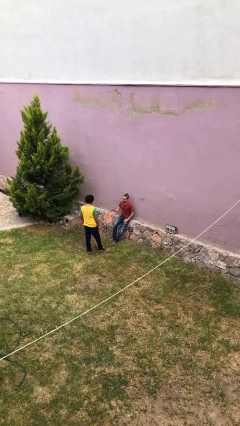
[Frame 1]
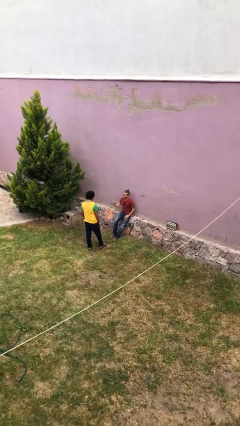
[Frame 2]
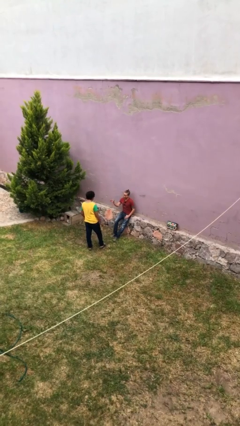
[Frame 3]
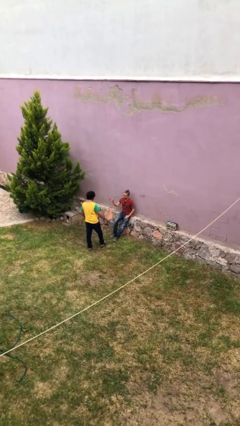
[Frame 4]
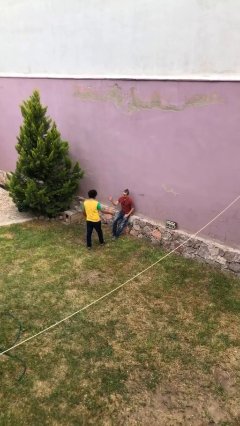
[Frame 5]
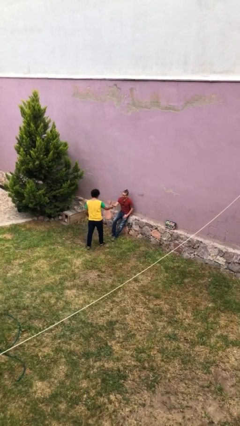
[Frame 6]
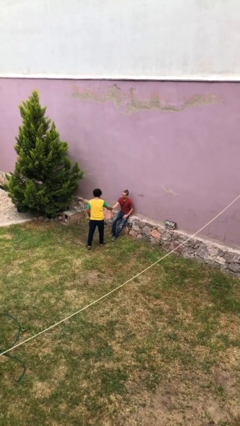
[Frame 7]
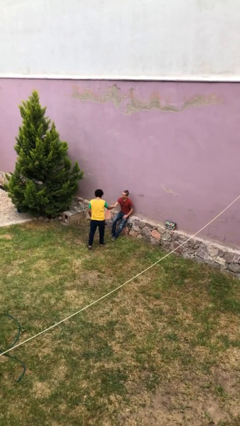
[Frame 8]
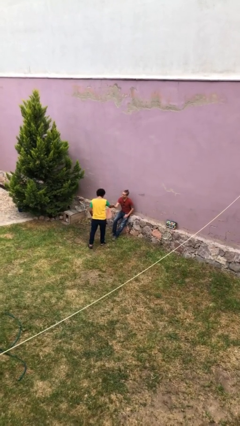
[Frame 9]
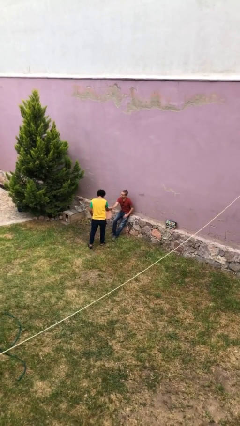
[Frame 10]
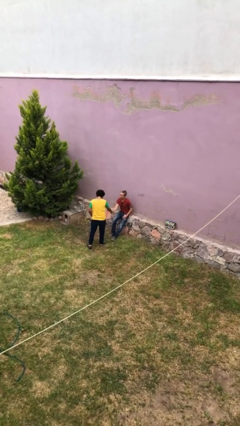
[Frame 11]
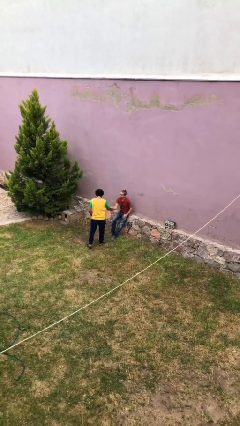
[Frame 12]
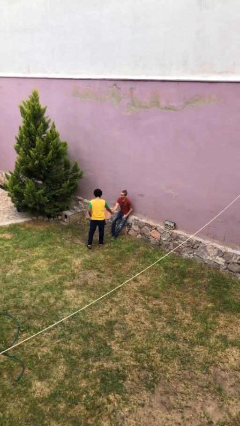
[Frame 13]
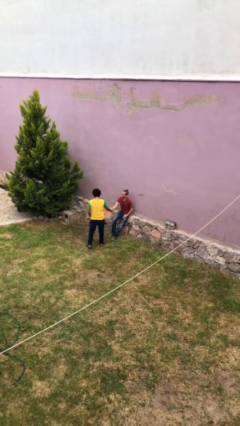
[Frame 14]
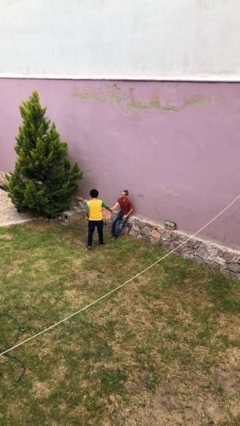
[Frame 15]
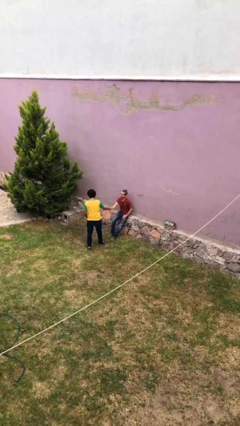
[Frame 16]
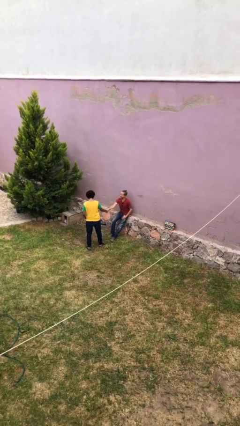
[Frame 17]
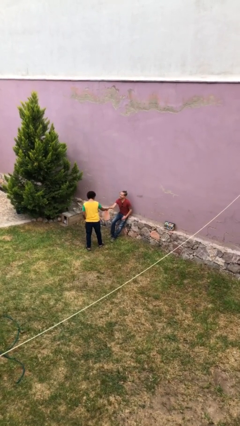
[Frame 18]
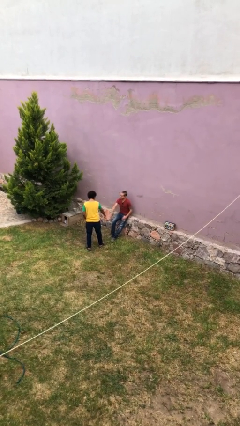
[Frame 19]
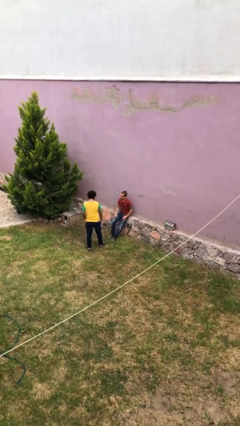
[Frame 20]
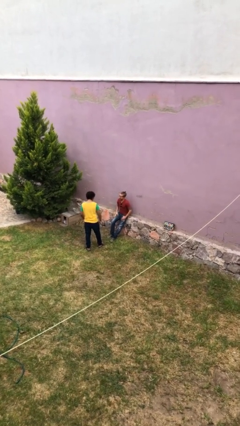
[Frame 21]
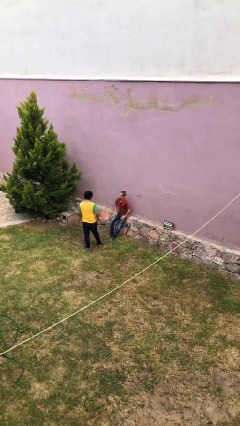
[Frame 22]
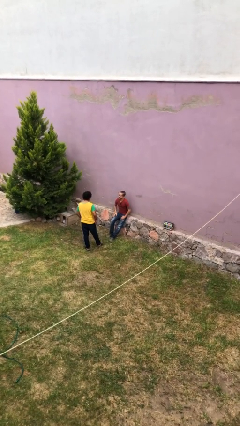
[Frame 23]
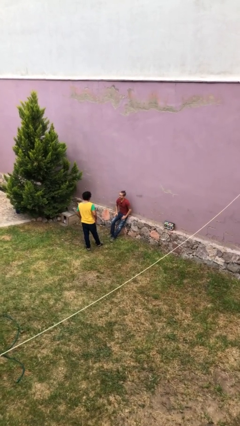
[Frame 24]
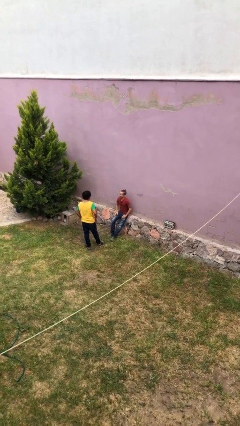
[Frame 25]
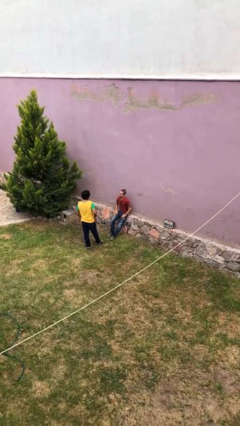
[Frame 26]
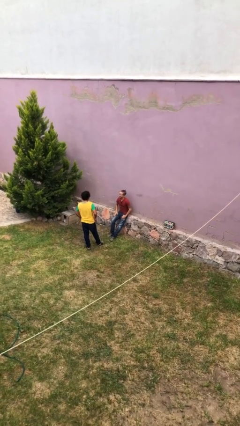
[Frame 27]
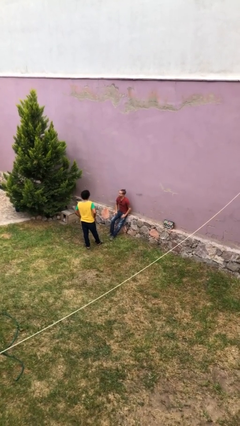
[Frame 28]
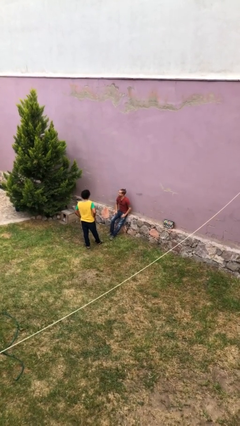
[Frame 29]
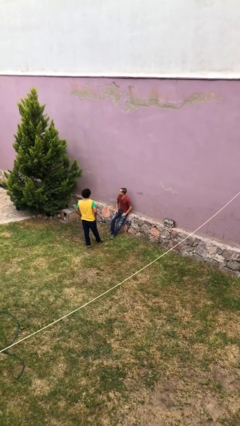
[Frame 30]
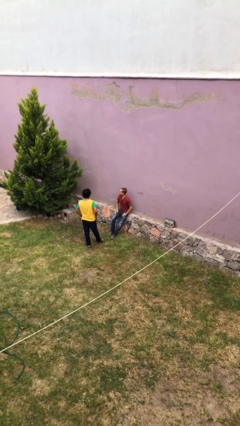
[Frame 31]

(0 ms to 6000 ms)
person shakes hand

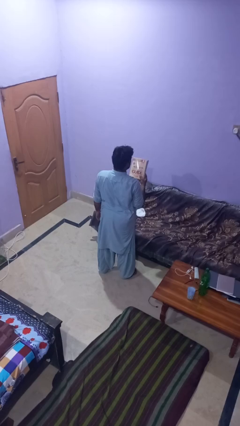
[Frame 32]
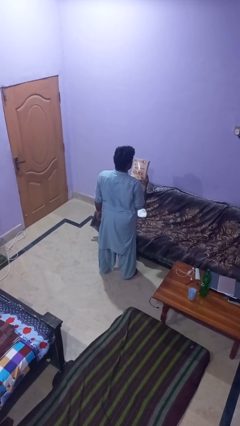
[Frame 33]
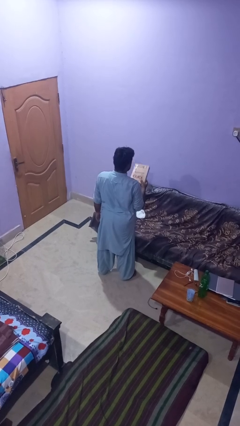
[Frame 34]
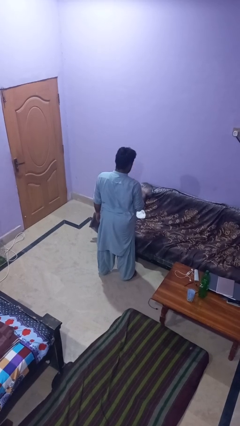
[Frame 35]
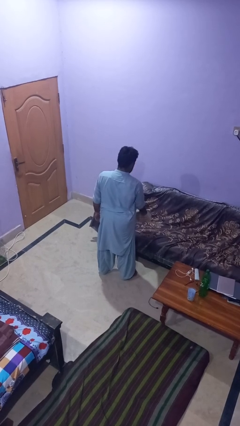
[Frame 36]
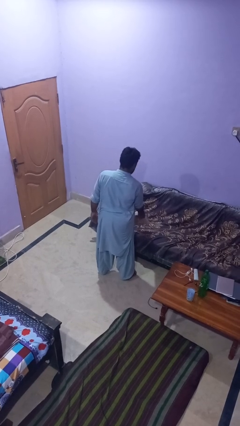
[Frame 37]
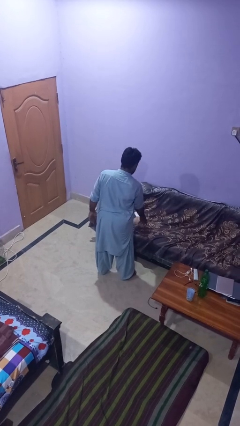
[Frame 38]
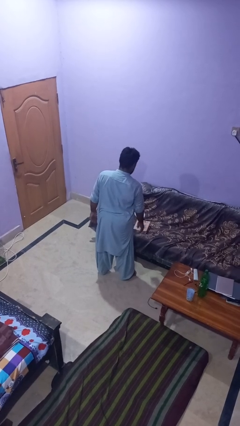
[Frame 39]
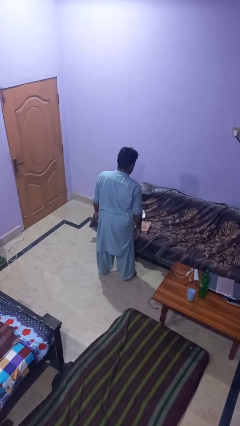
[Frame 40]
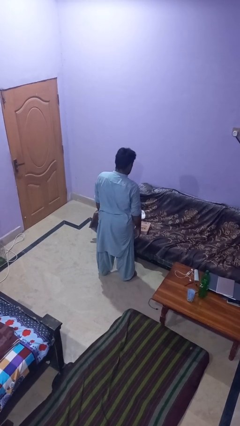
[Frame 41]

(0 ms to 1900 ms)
person puts down object on couch

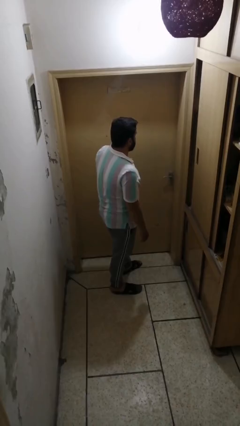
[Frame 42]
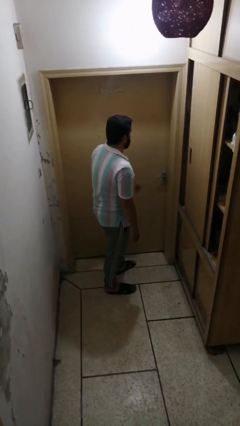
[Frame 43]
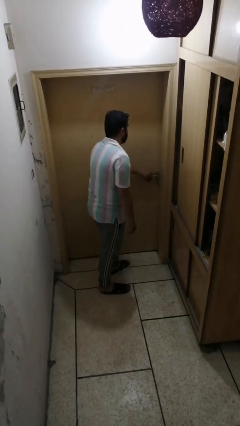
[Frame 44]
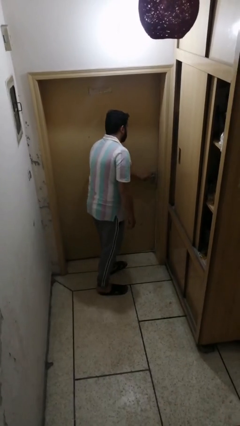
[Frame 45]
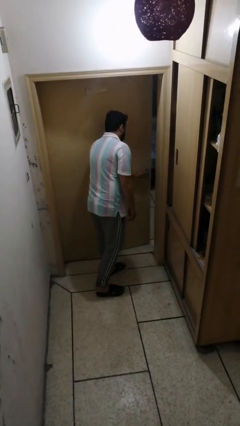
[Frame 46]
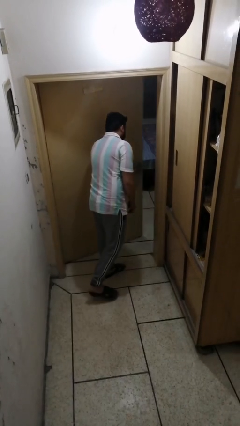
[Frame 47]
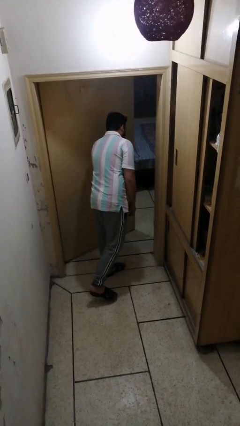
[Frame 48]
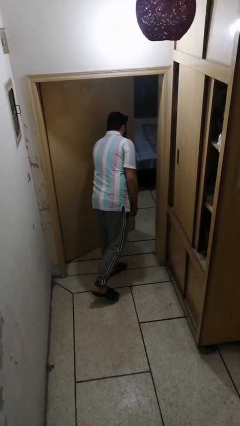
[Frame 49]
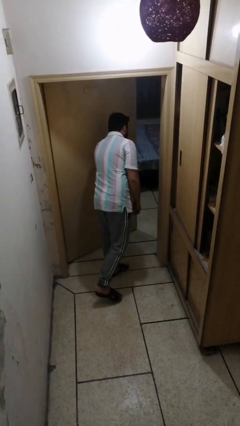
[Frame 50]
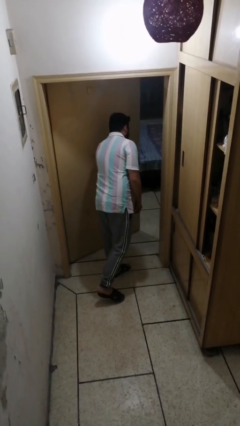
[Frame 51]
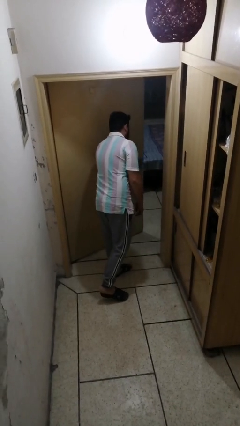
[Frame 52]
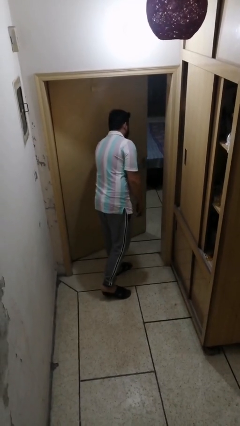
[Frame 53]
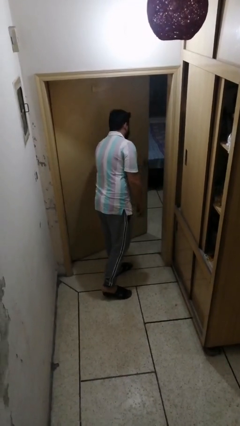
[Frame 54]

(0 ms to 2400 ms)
person opens facility door

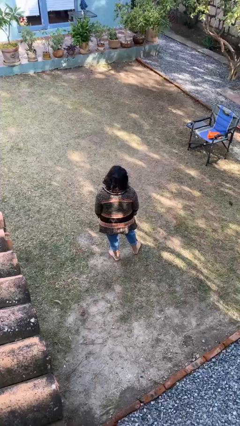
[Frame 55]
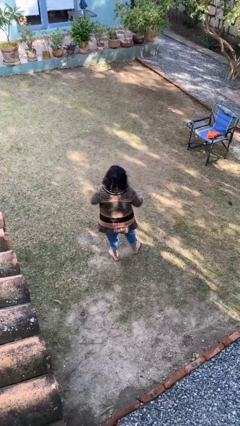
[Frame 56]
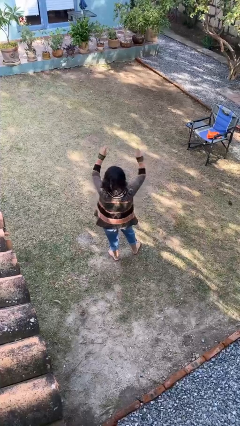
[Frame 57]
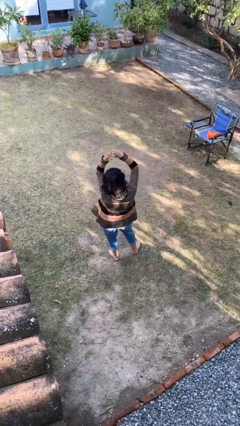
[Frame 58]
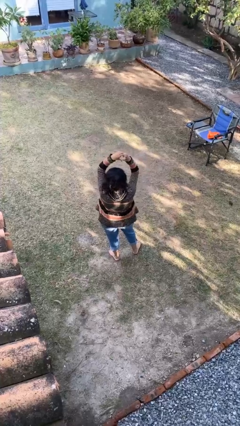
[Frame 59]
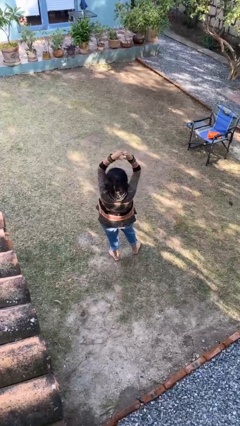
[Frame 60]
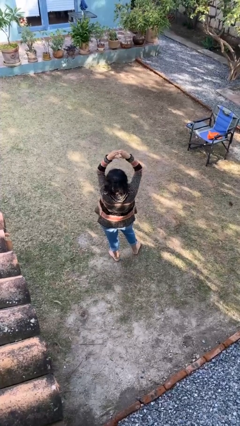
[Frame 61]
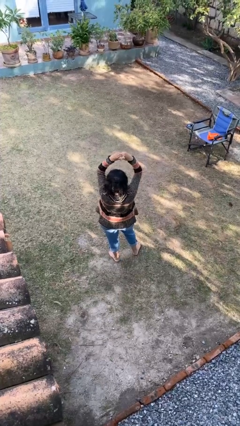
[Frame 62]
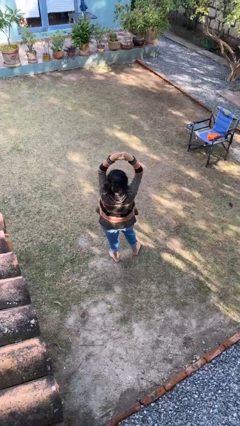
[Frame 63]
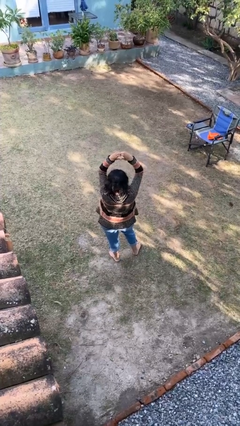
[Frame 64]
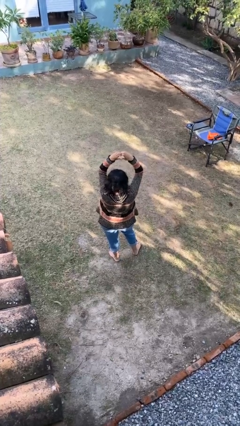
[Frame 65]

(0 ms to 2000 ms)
person gestures heart

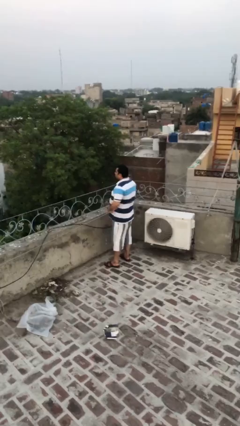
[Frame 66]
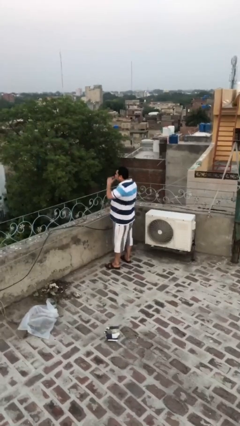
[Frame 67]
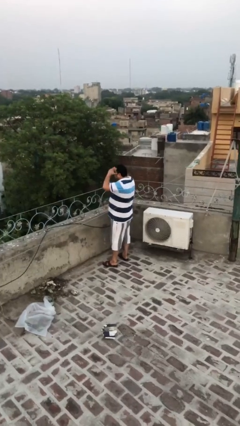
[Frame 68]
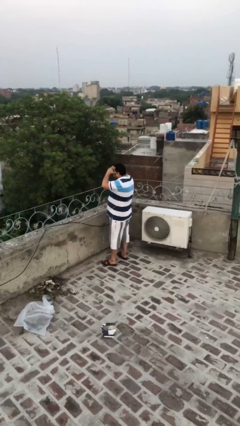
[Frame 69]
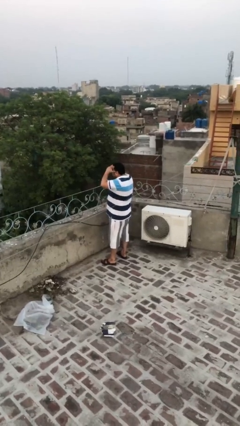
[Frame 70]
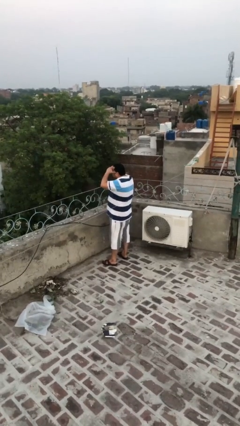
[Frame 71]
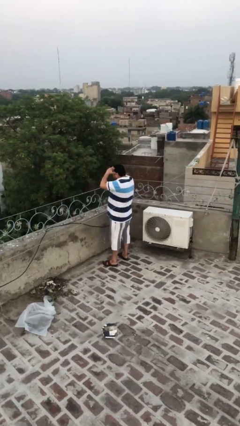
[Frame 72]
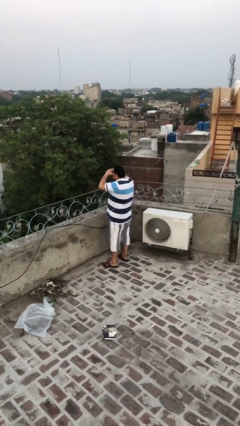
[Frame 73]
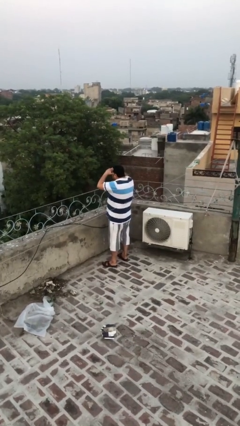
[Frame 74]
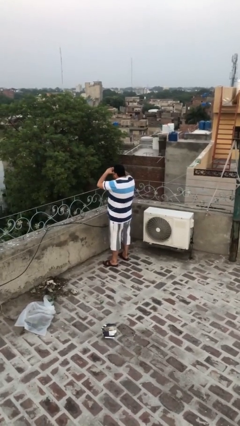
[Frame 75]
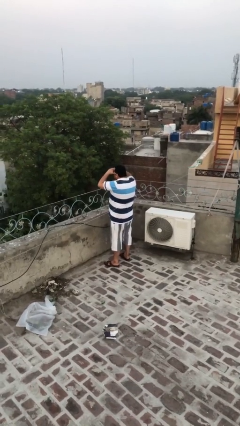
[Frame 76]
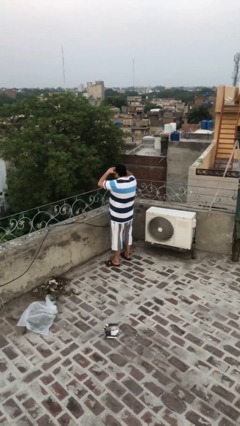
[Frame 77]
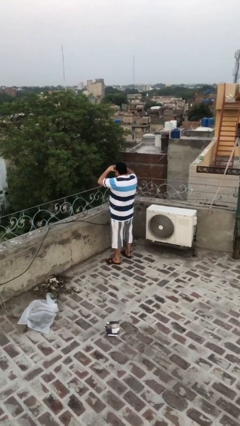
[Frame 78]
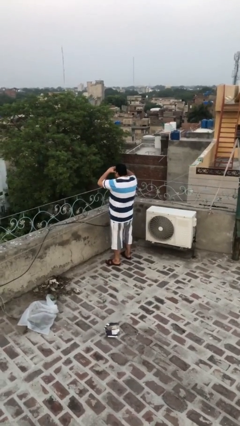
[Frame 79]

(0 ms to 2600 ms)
person shades eyes

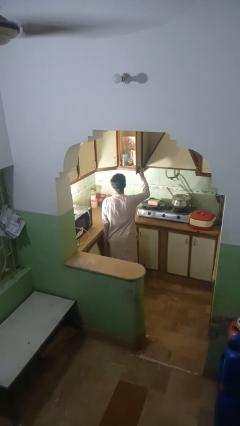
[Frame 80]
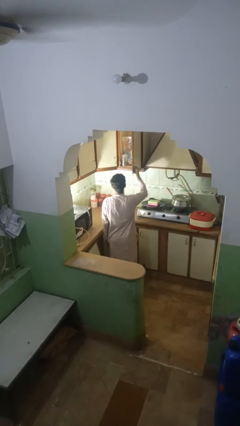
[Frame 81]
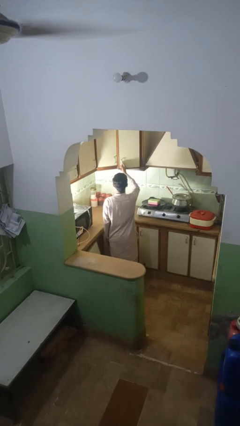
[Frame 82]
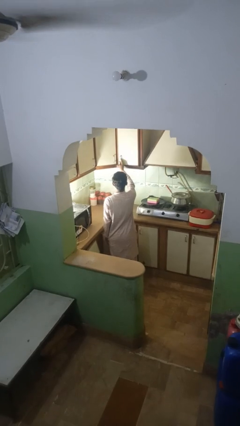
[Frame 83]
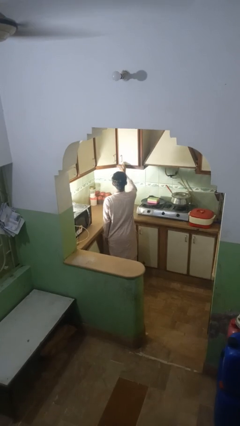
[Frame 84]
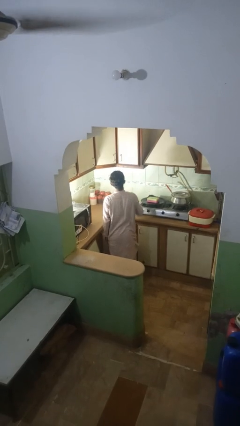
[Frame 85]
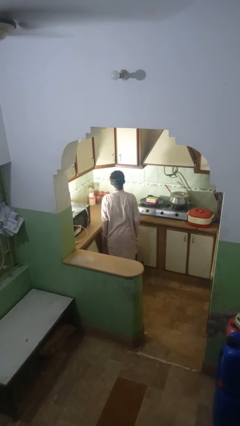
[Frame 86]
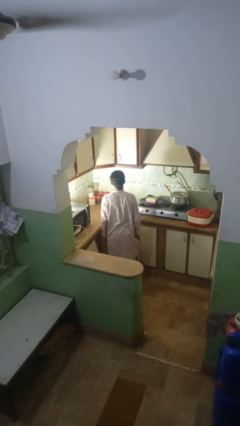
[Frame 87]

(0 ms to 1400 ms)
person closes kitchen drawer

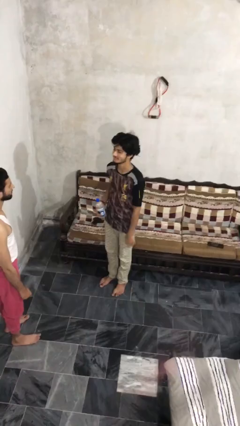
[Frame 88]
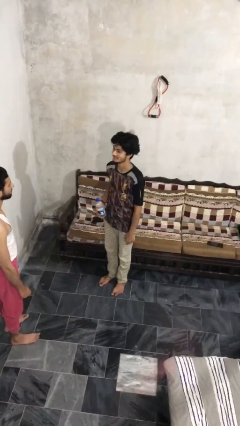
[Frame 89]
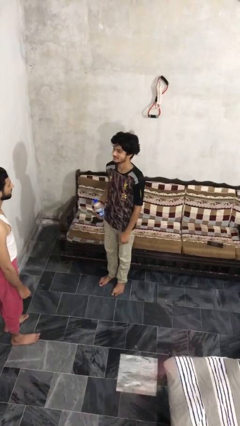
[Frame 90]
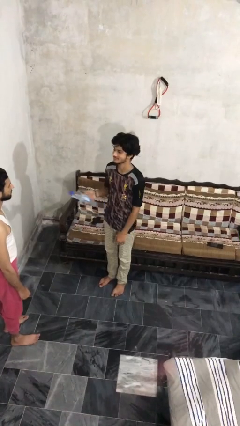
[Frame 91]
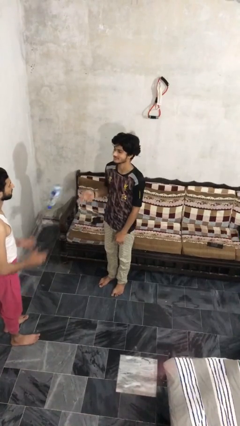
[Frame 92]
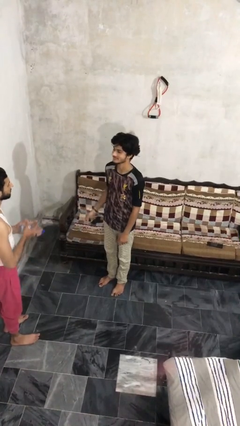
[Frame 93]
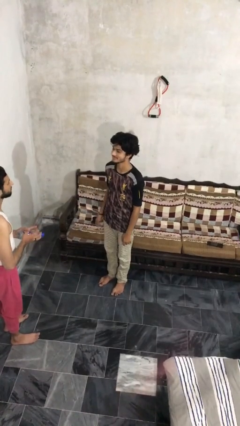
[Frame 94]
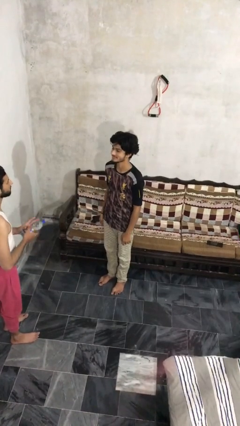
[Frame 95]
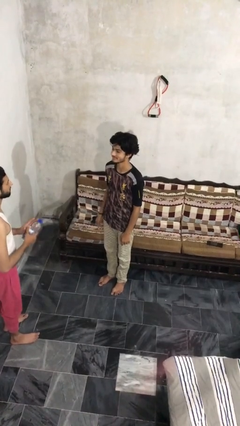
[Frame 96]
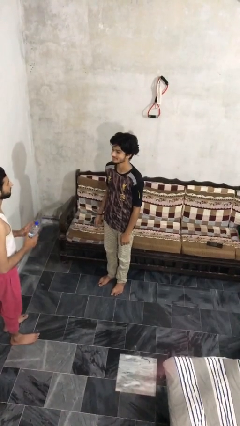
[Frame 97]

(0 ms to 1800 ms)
person throws object to person
